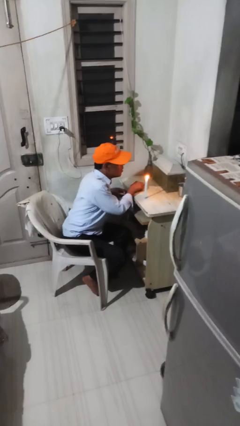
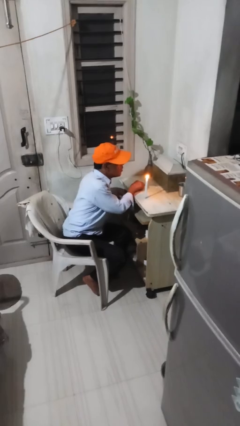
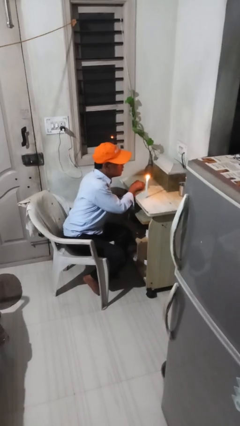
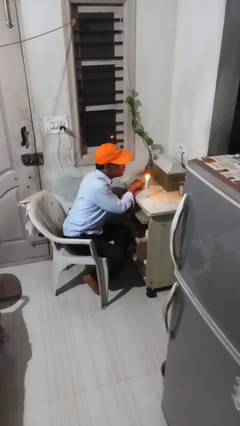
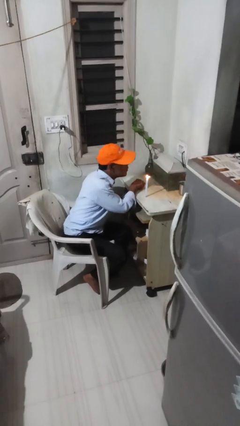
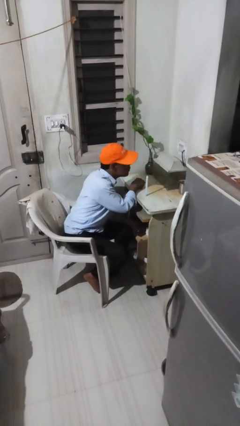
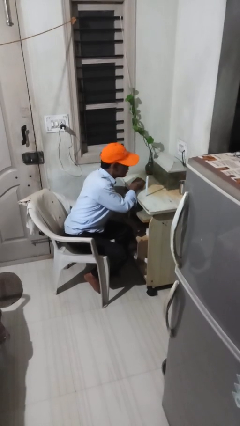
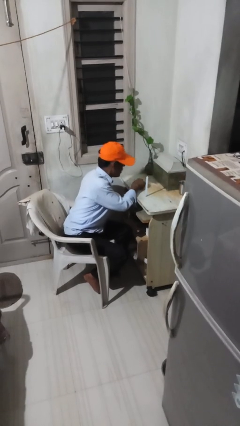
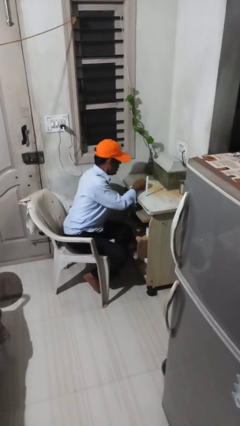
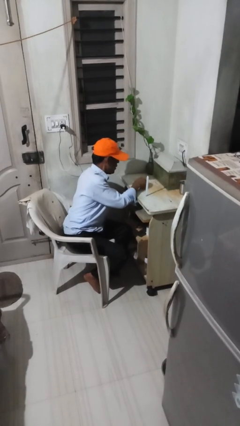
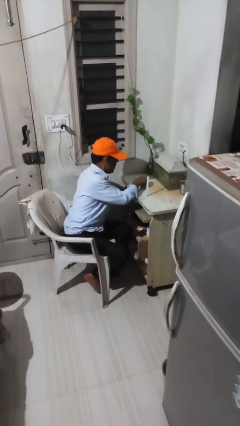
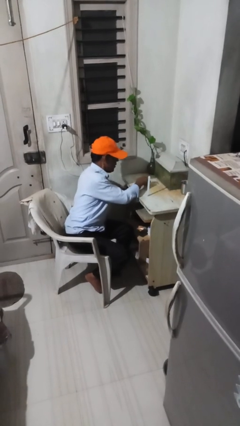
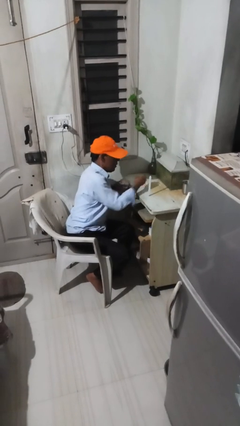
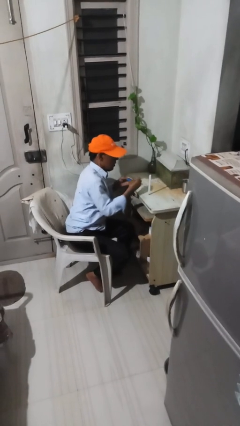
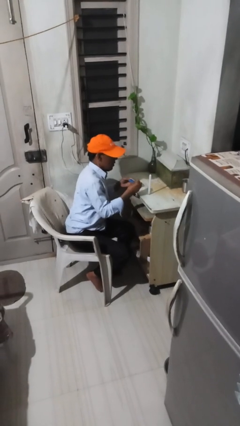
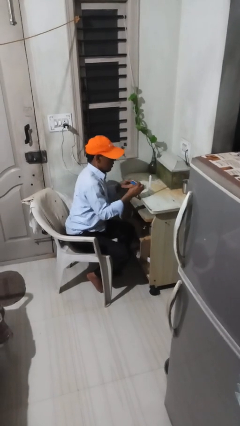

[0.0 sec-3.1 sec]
person extinguishes candle

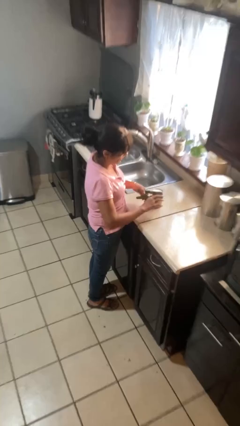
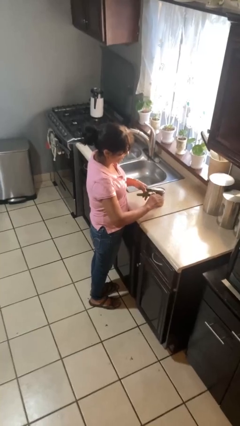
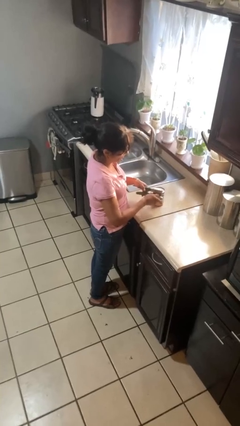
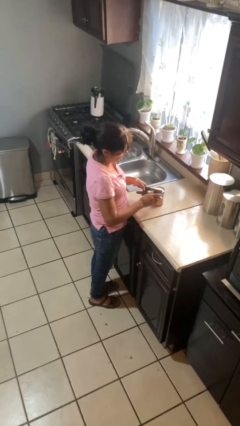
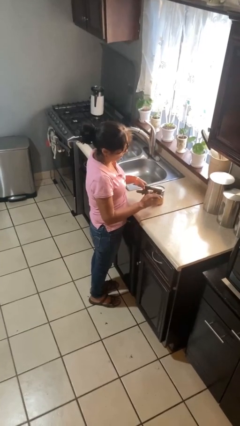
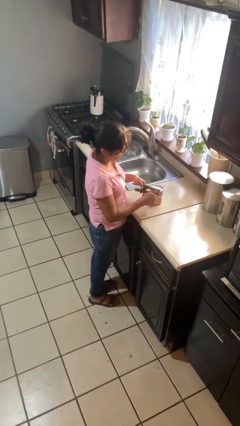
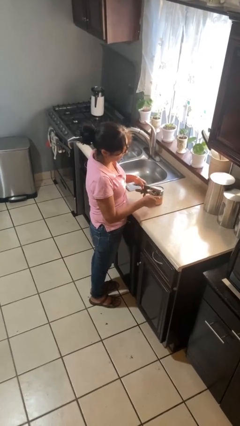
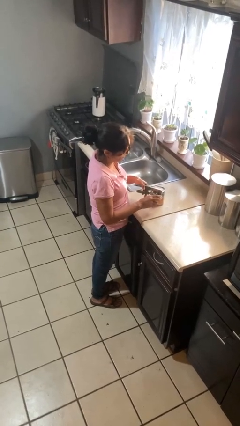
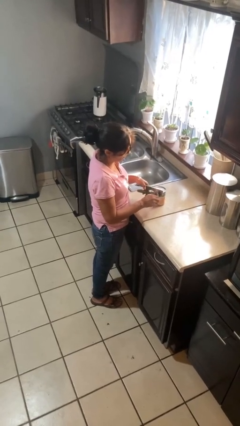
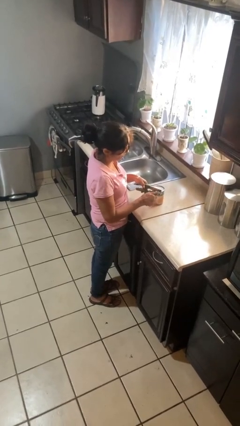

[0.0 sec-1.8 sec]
person opens can with can opener

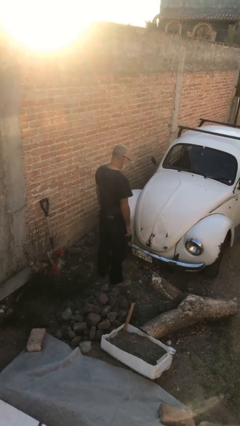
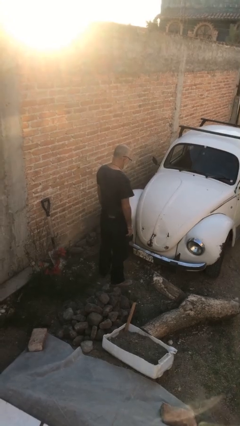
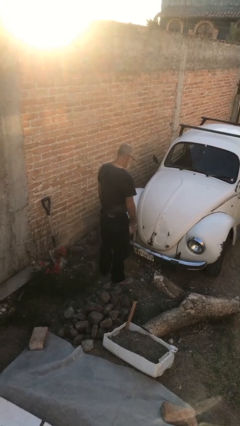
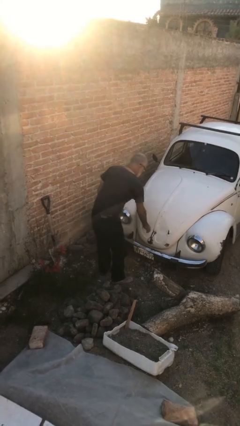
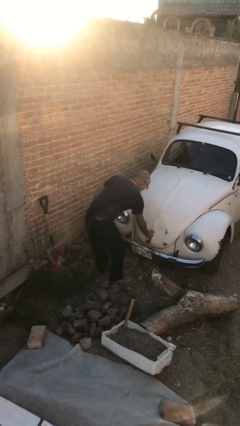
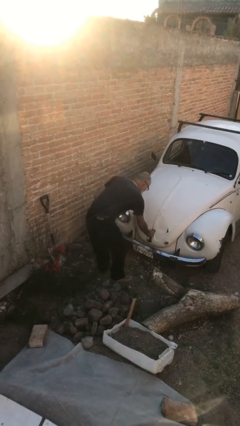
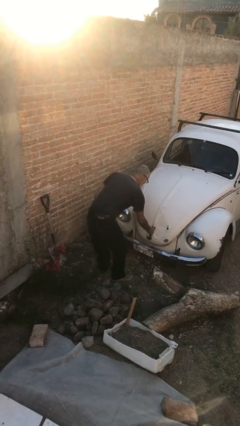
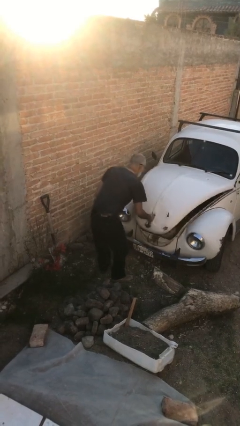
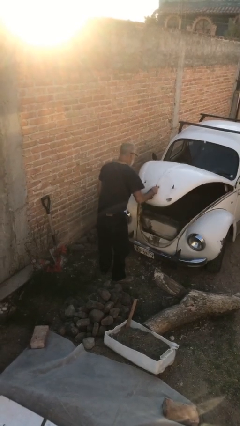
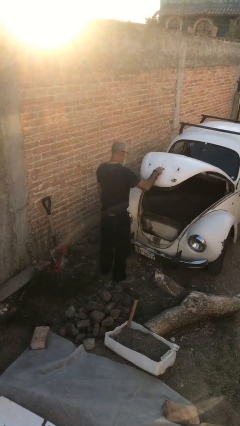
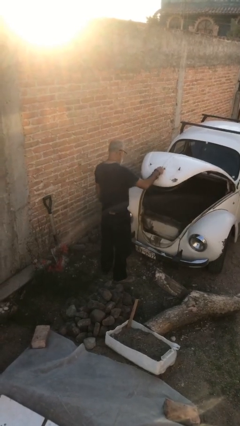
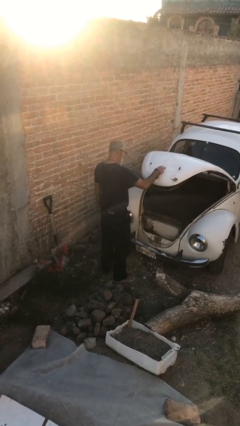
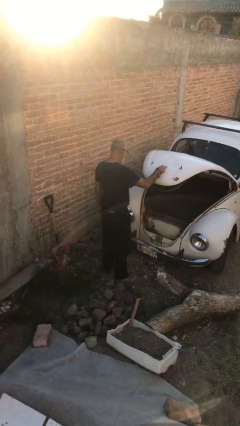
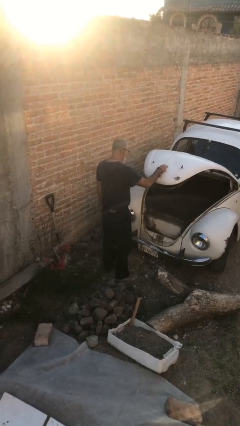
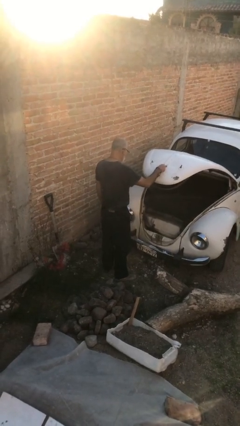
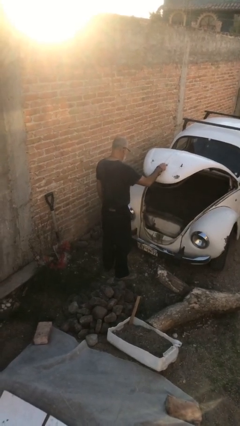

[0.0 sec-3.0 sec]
person opens car trunk

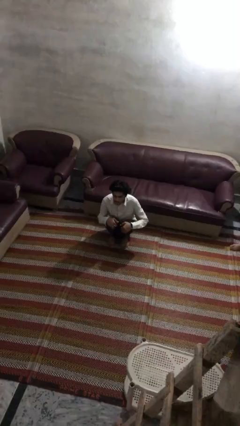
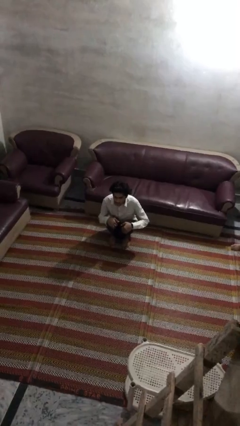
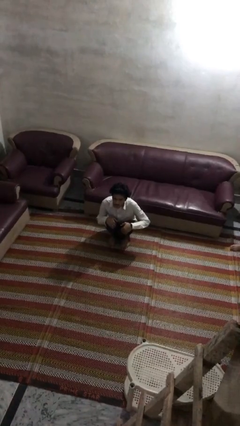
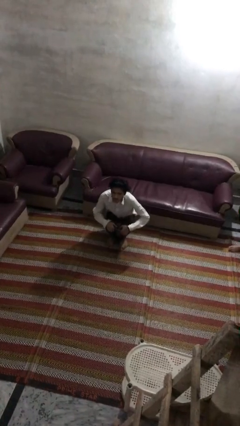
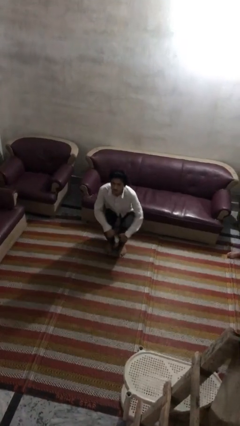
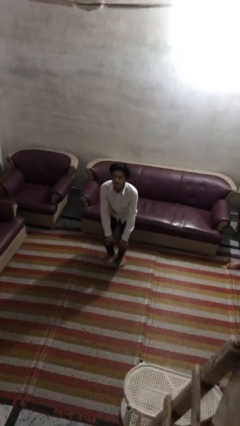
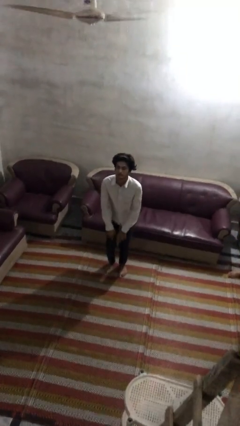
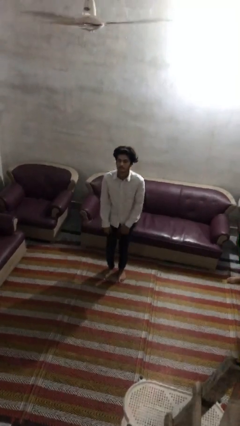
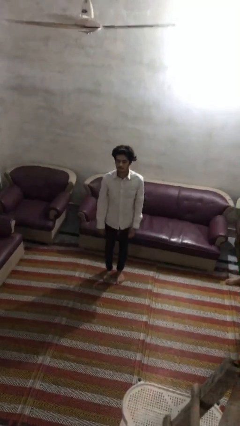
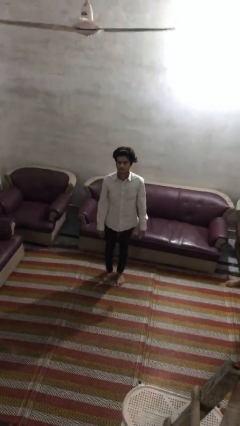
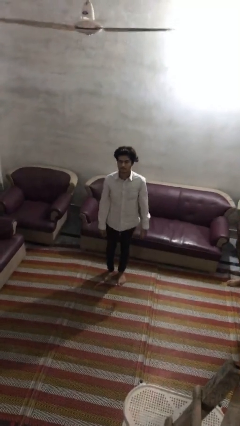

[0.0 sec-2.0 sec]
person stands up

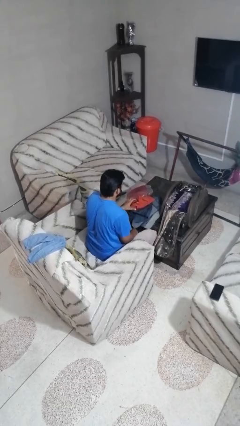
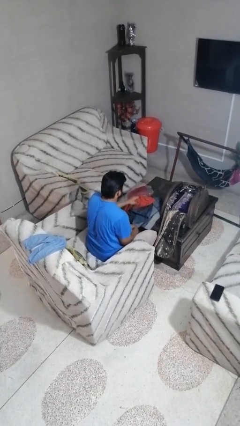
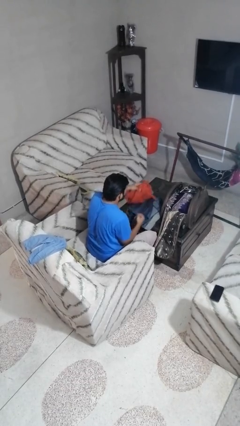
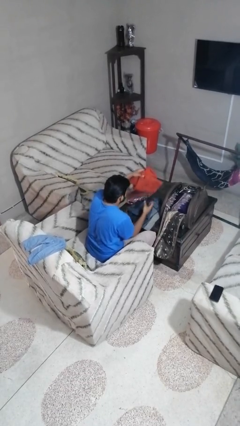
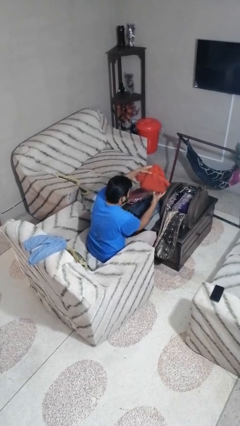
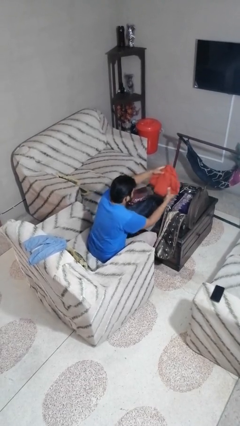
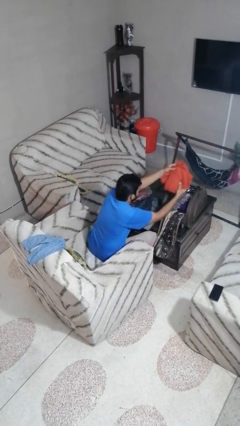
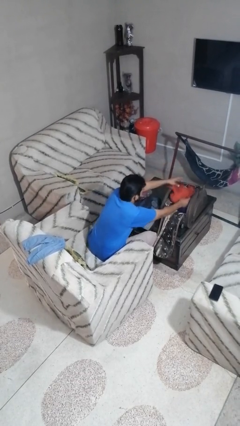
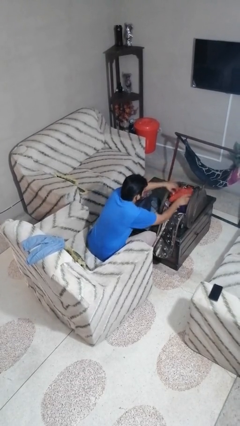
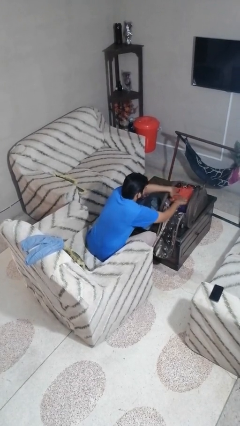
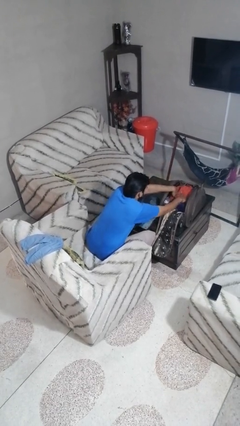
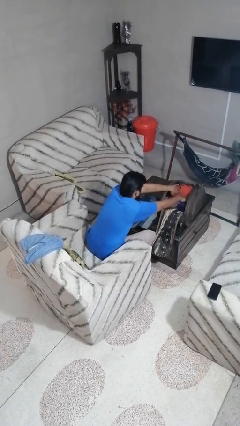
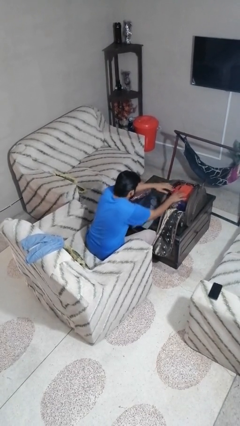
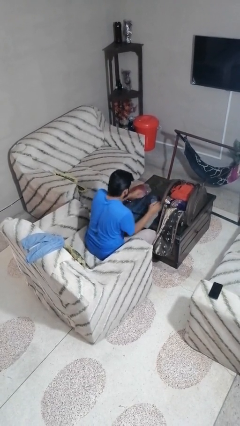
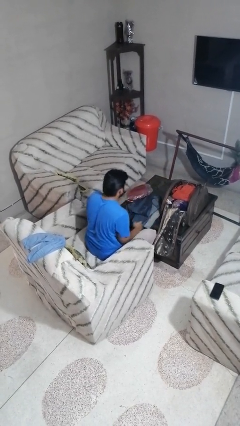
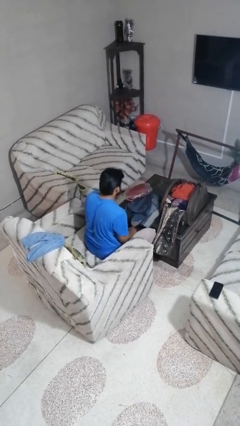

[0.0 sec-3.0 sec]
person loads clothes into suitcase

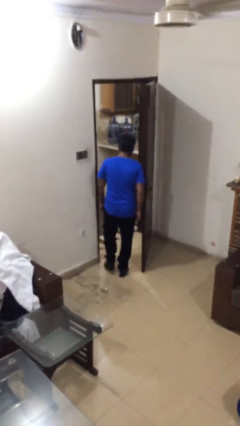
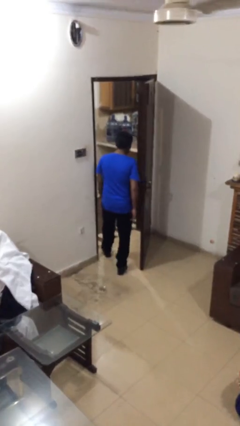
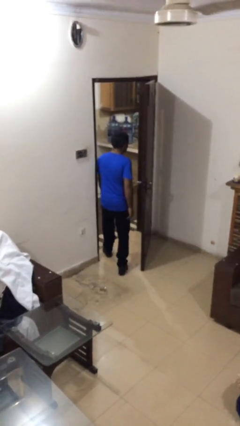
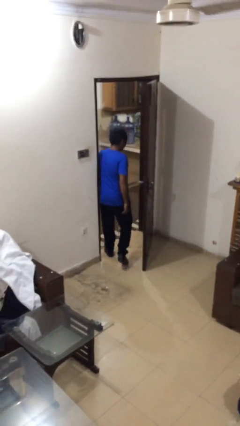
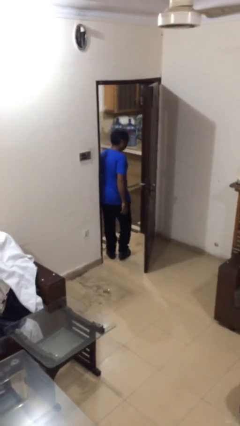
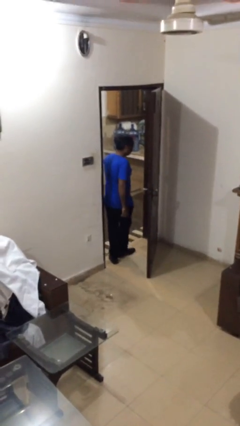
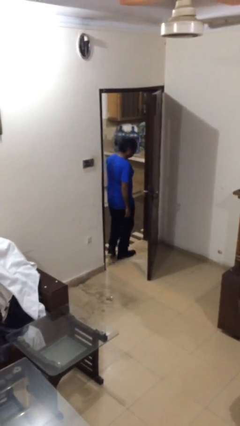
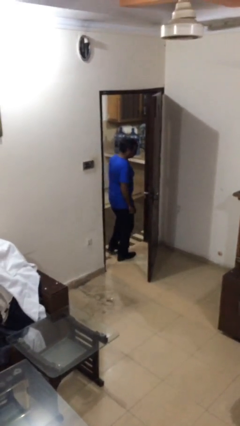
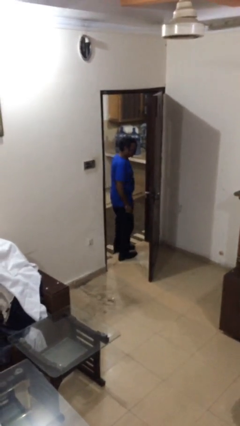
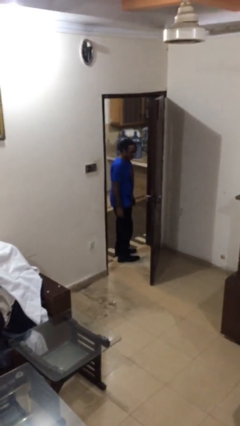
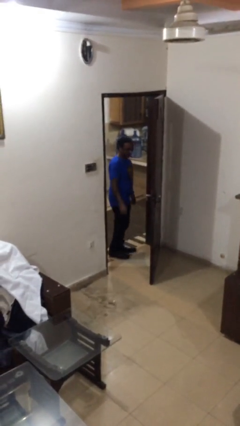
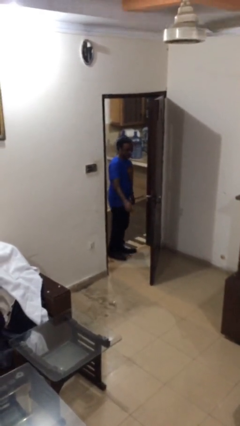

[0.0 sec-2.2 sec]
person exits scene through structure

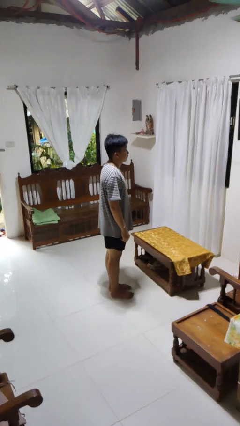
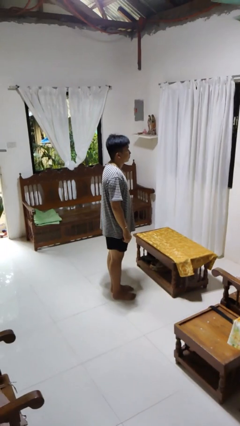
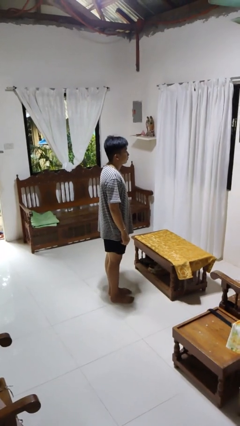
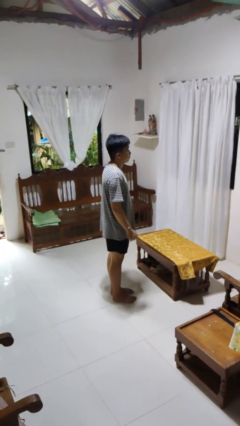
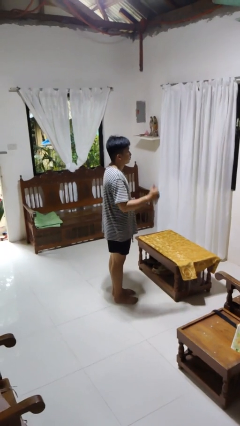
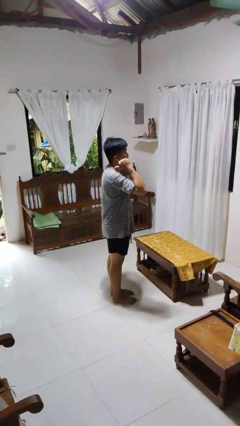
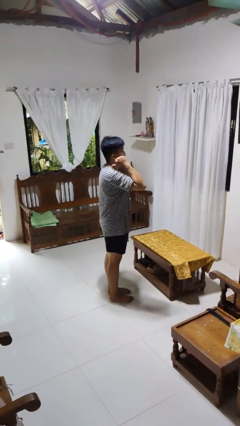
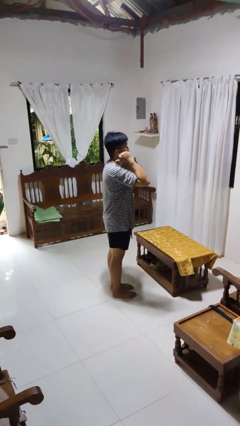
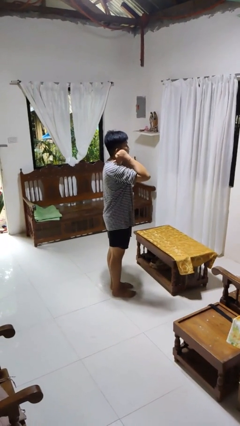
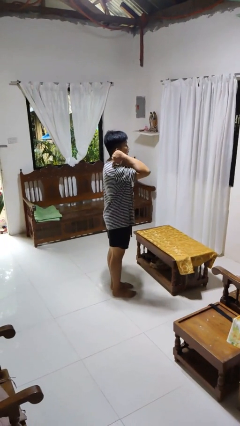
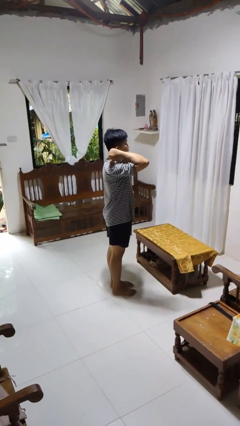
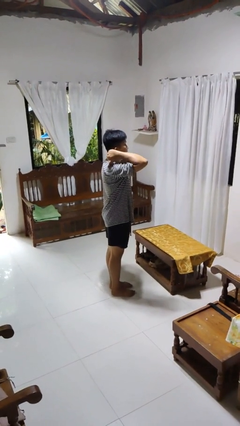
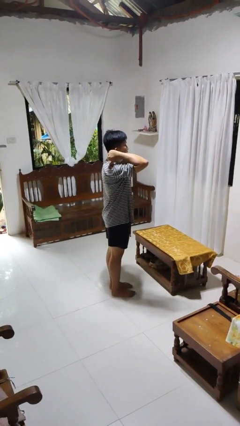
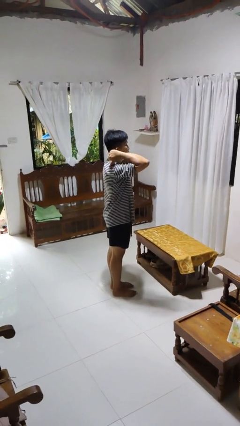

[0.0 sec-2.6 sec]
person gestures behind me
